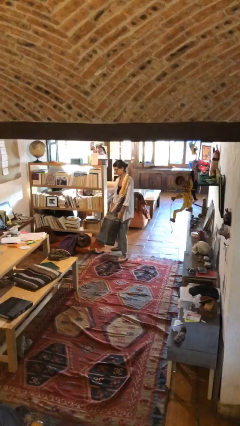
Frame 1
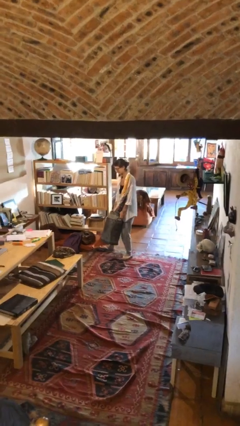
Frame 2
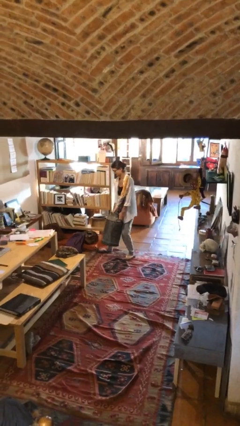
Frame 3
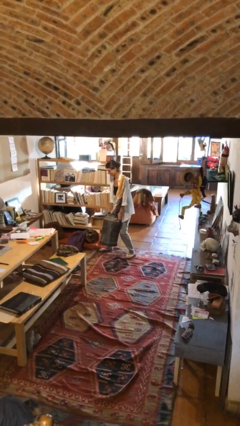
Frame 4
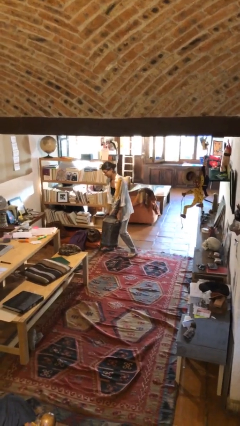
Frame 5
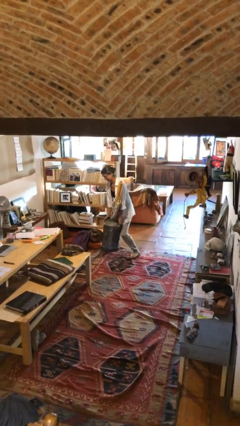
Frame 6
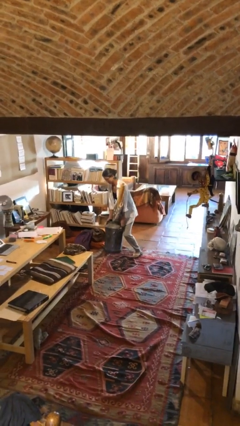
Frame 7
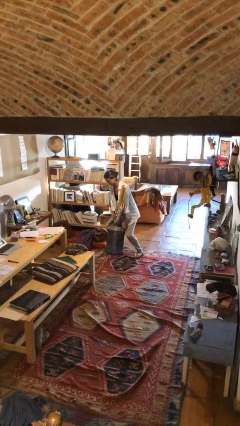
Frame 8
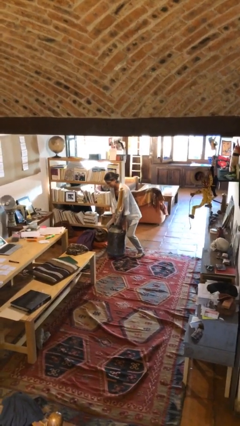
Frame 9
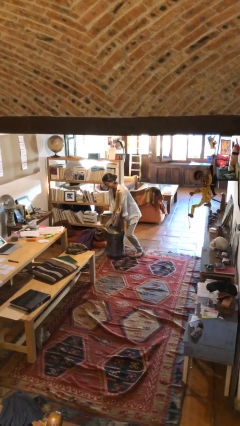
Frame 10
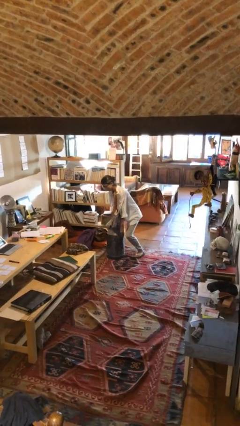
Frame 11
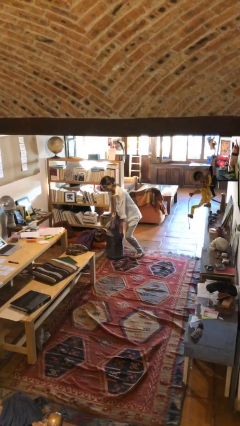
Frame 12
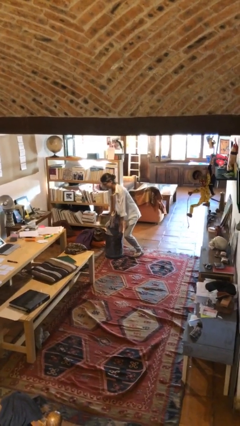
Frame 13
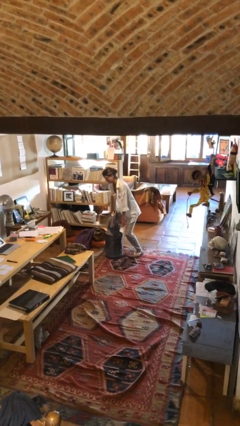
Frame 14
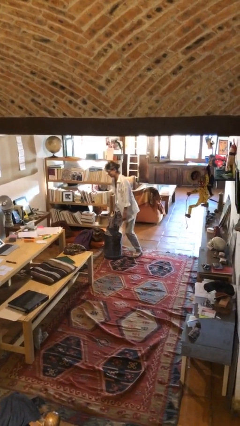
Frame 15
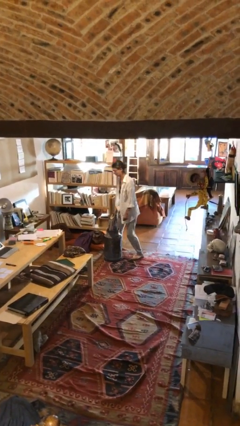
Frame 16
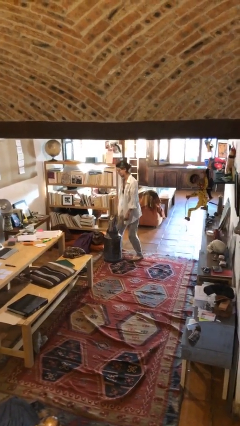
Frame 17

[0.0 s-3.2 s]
person puts down object on floor

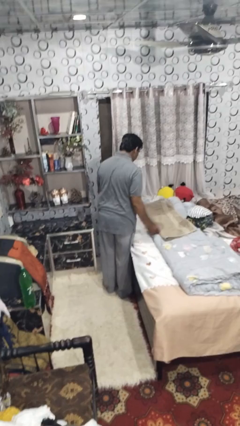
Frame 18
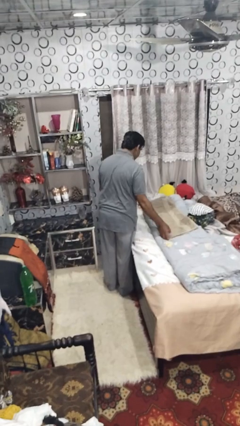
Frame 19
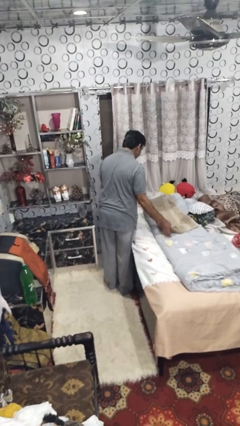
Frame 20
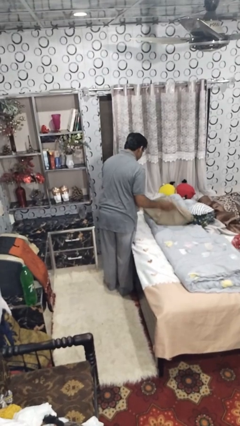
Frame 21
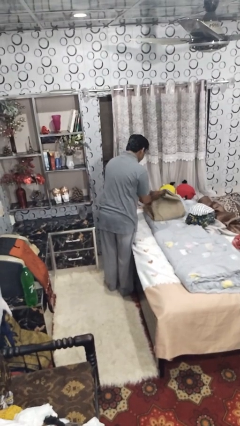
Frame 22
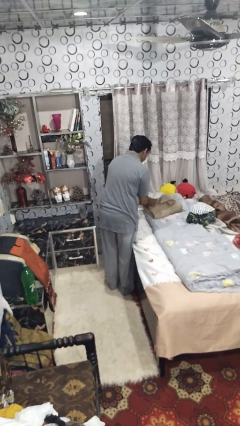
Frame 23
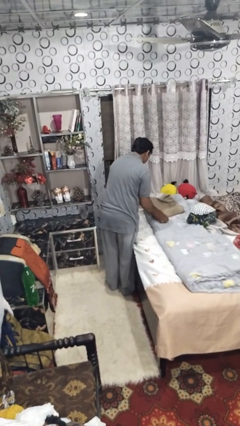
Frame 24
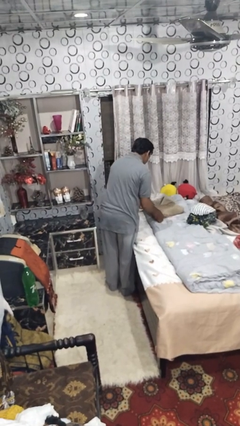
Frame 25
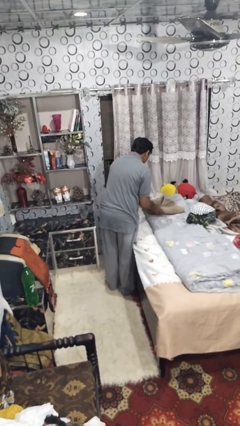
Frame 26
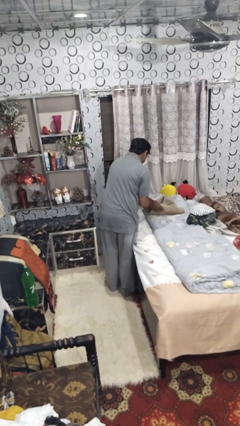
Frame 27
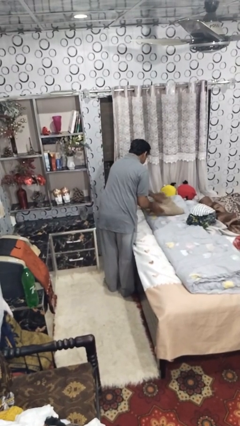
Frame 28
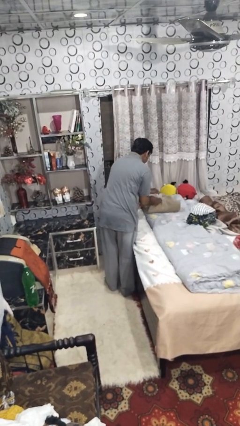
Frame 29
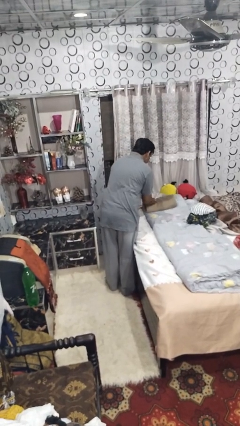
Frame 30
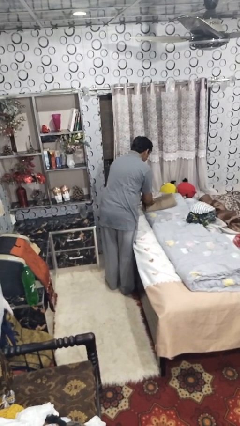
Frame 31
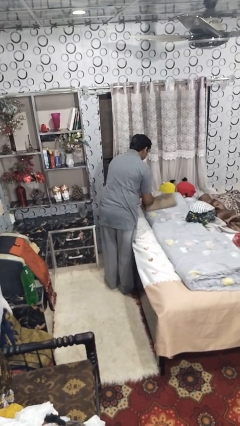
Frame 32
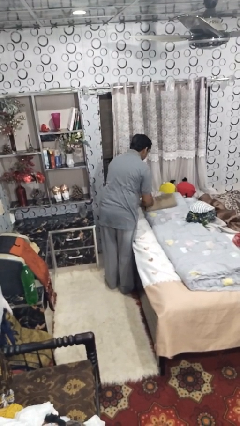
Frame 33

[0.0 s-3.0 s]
person folds towel

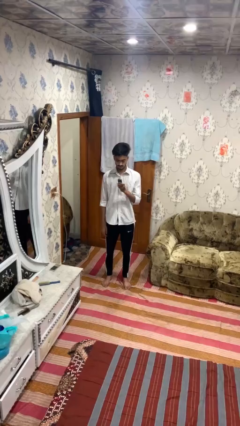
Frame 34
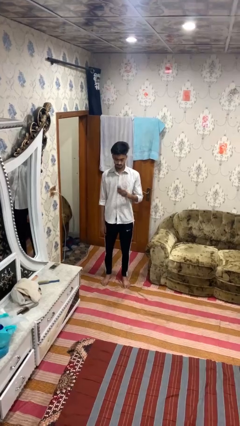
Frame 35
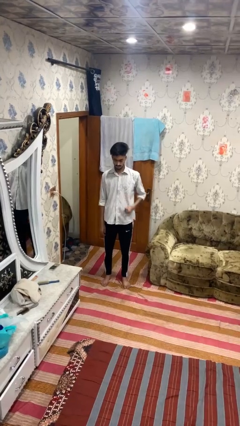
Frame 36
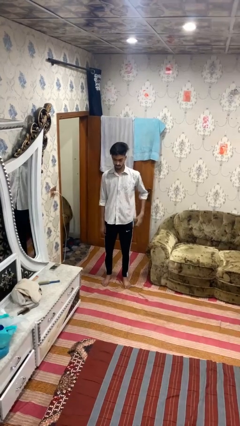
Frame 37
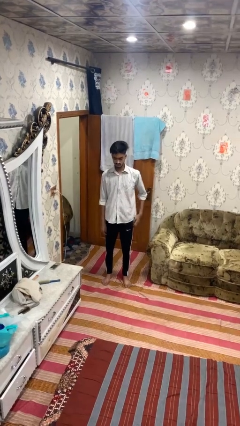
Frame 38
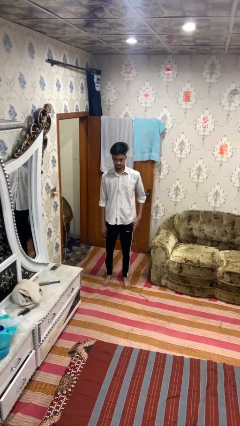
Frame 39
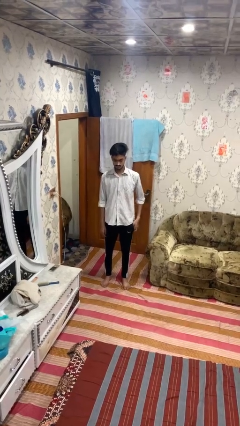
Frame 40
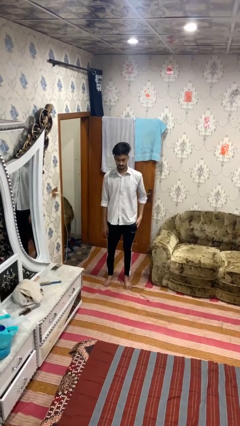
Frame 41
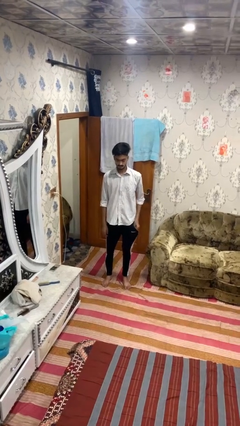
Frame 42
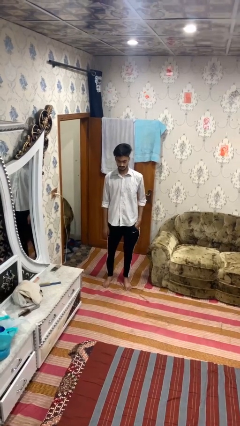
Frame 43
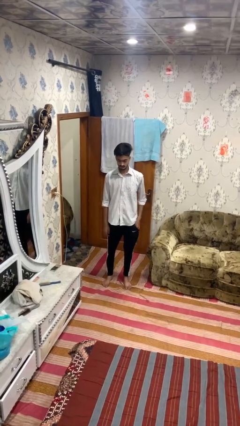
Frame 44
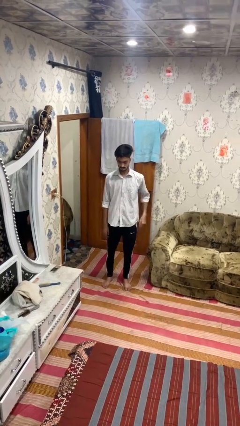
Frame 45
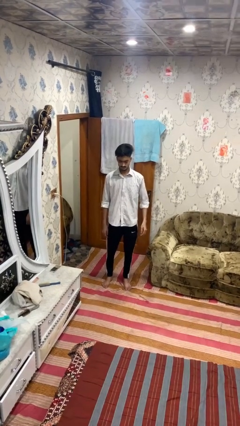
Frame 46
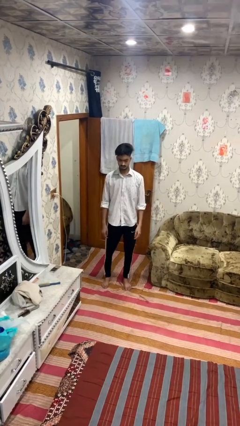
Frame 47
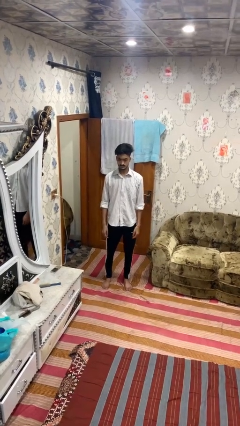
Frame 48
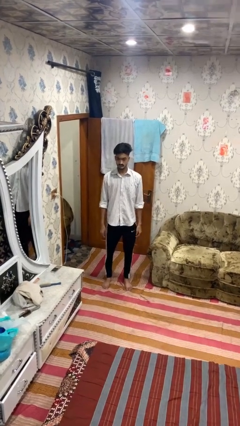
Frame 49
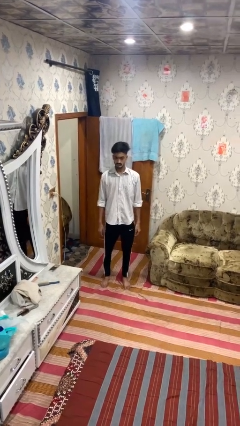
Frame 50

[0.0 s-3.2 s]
person puts phone into pocket

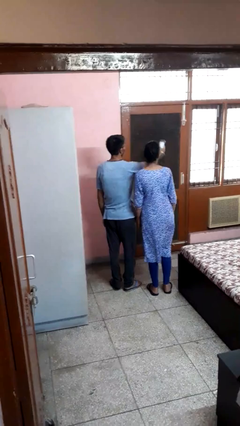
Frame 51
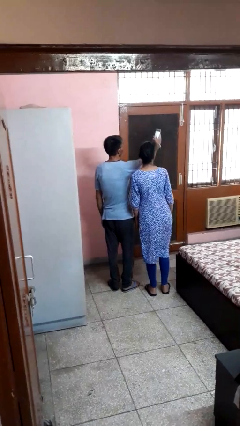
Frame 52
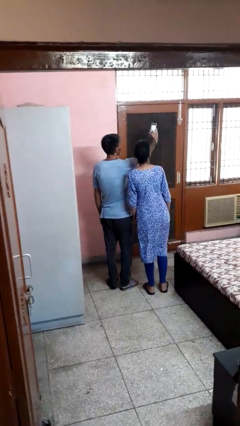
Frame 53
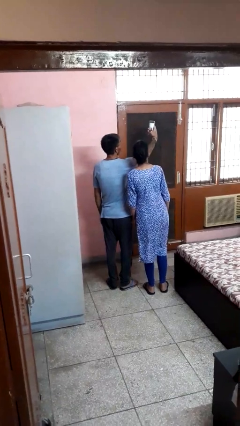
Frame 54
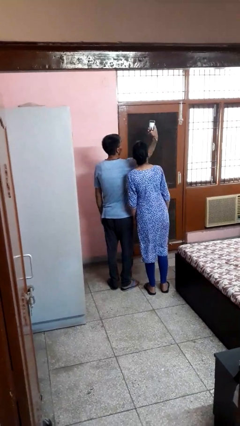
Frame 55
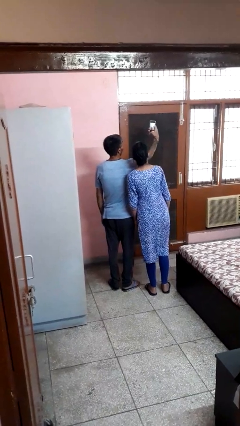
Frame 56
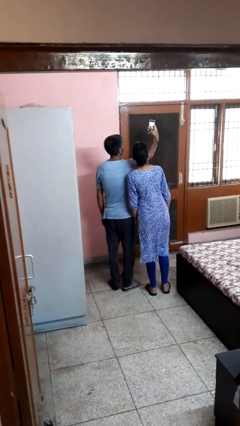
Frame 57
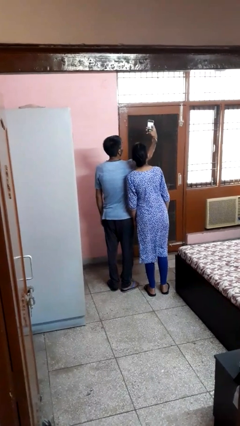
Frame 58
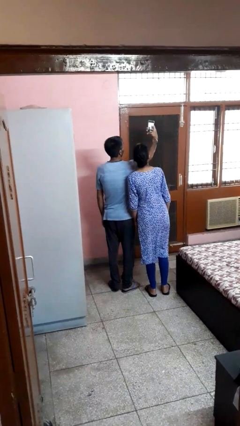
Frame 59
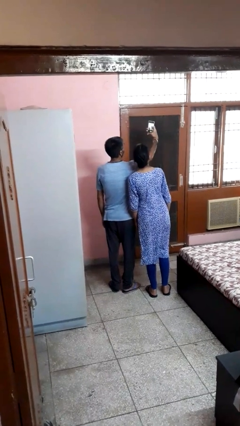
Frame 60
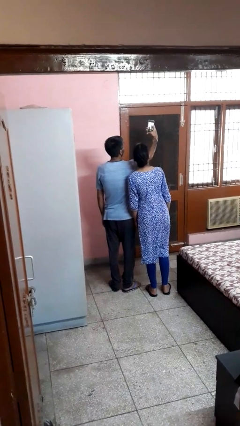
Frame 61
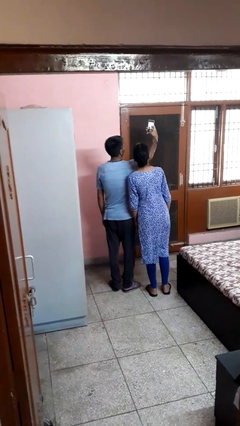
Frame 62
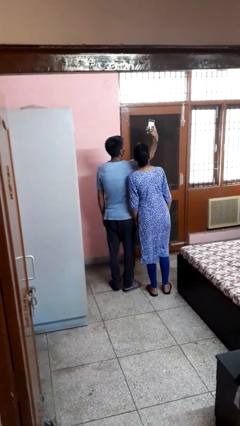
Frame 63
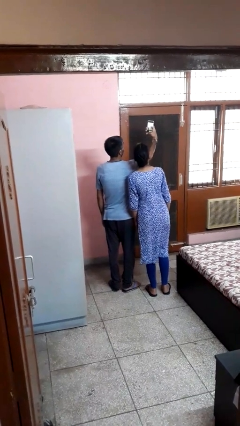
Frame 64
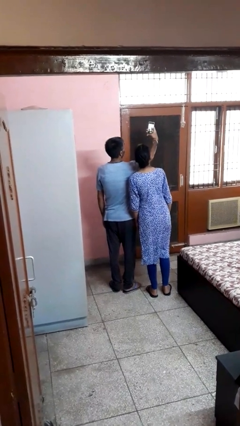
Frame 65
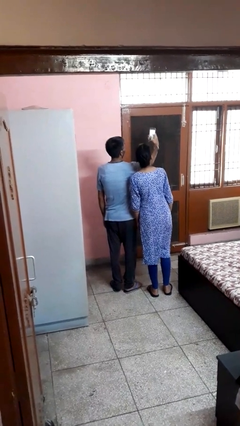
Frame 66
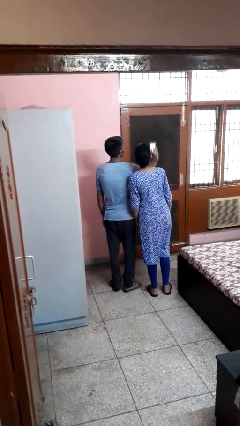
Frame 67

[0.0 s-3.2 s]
person takes selfie with person

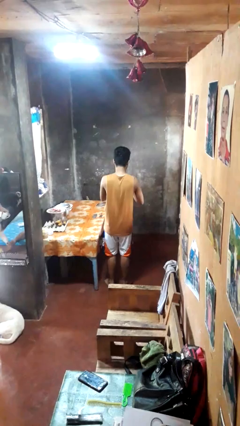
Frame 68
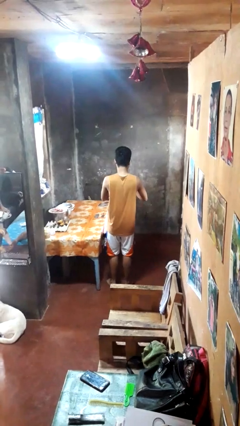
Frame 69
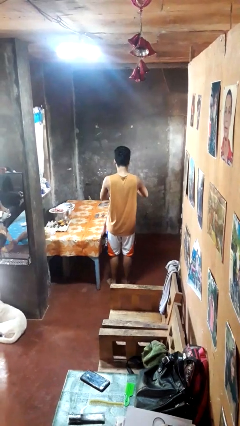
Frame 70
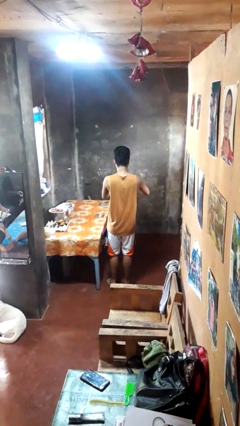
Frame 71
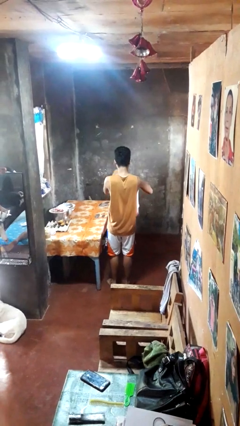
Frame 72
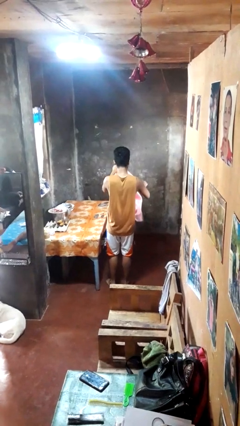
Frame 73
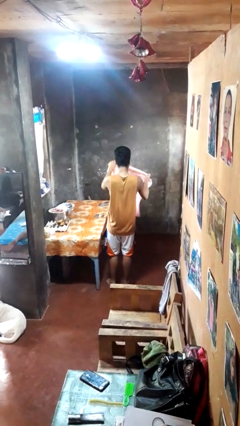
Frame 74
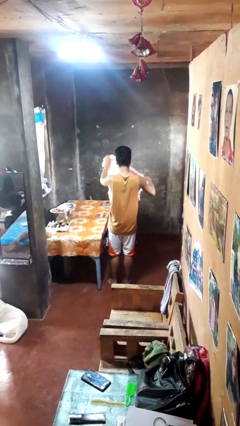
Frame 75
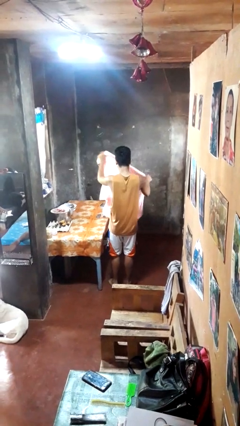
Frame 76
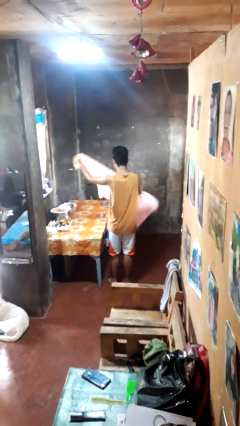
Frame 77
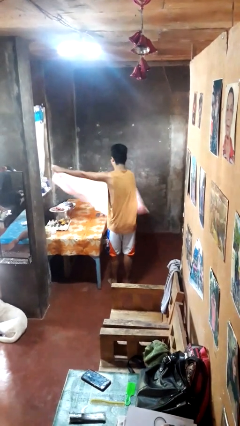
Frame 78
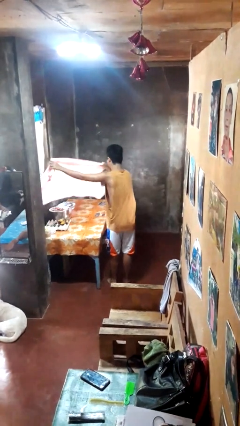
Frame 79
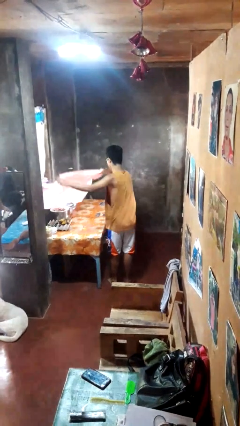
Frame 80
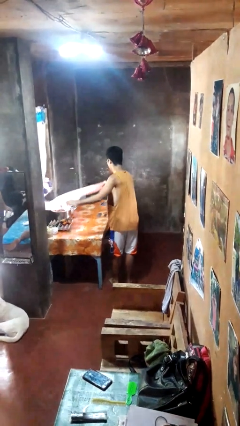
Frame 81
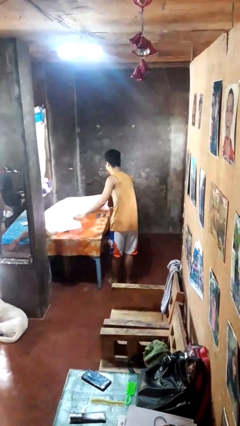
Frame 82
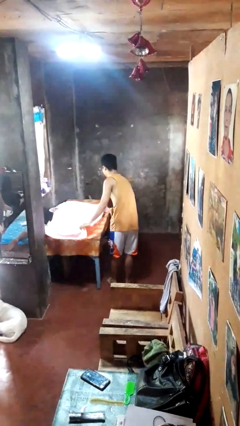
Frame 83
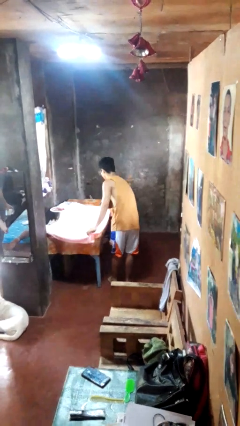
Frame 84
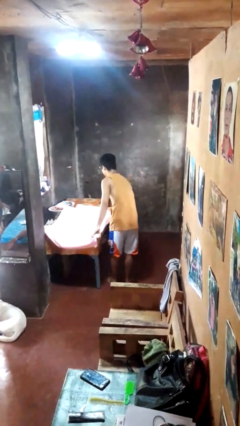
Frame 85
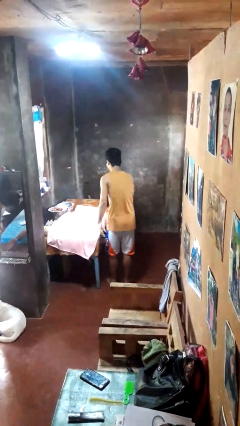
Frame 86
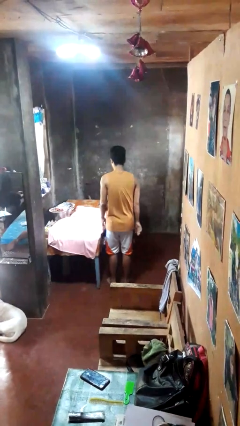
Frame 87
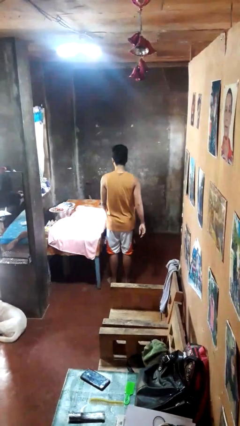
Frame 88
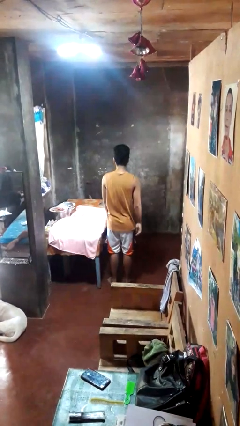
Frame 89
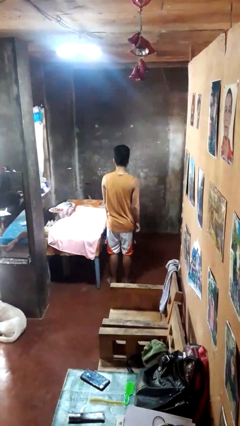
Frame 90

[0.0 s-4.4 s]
person spreads tablecloth

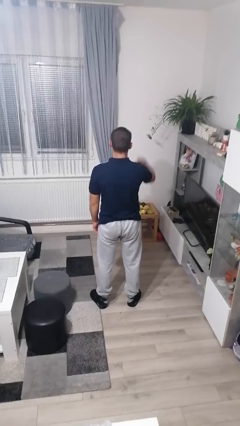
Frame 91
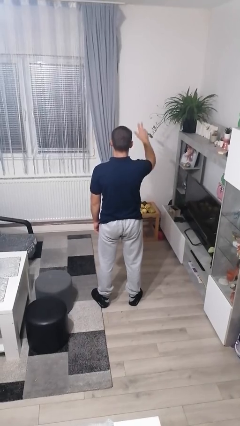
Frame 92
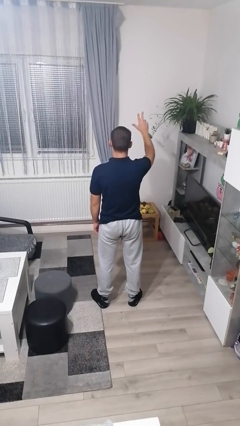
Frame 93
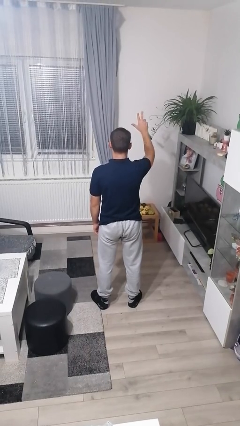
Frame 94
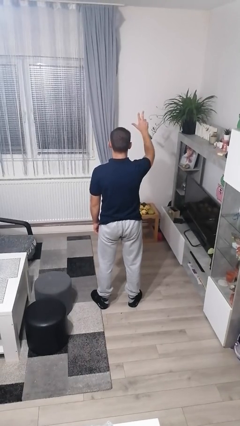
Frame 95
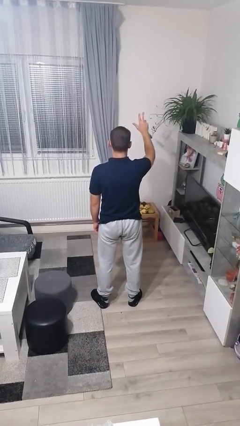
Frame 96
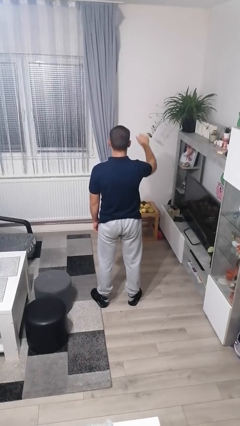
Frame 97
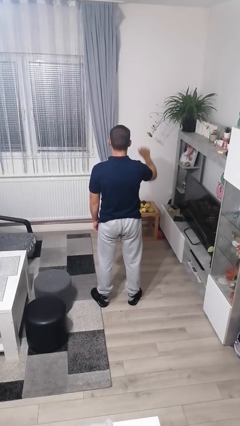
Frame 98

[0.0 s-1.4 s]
person gestures number three
